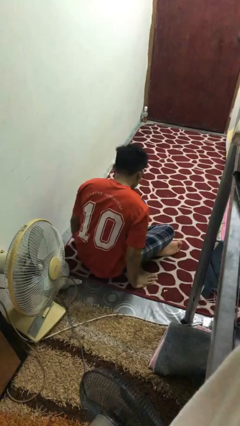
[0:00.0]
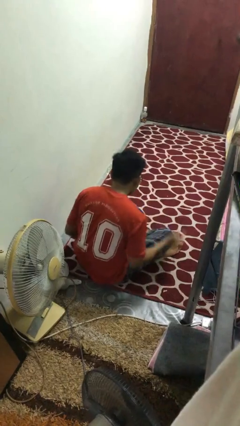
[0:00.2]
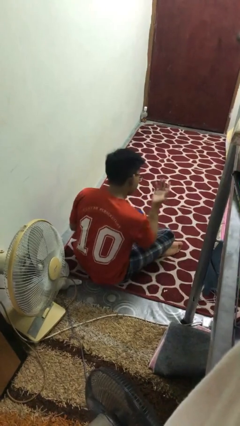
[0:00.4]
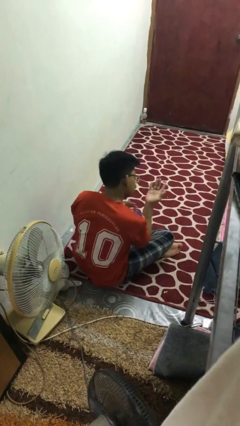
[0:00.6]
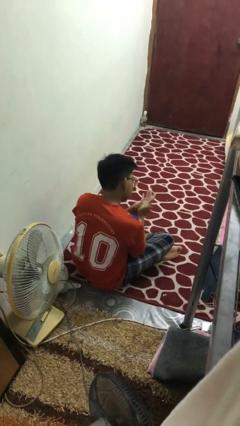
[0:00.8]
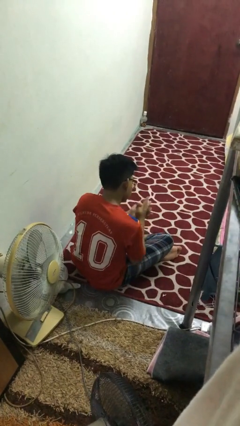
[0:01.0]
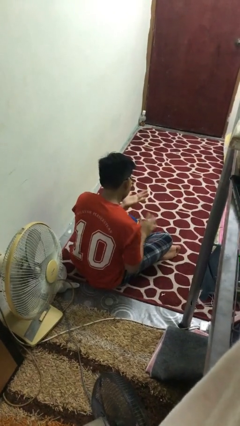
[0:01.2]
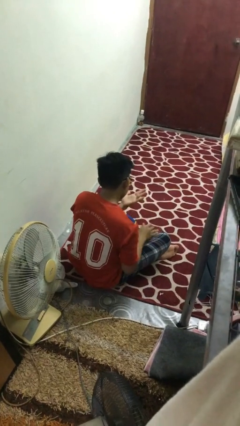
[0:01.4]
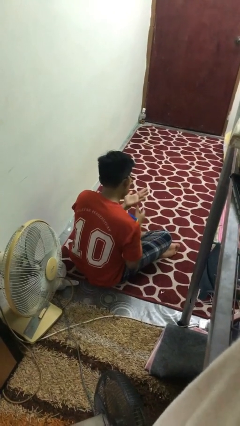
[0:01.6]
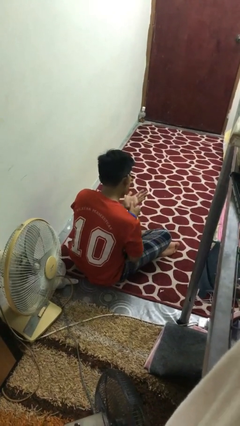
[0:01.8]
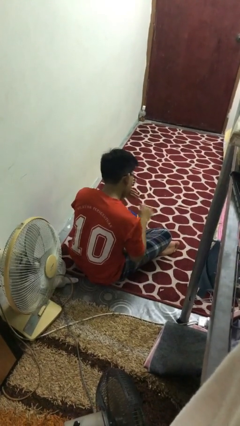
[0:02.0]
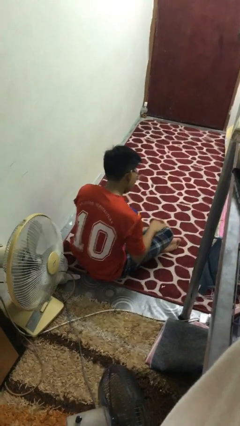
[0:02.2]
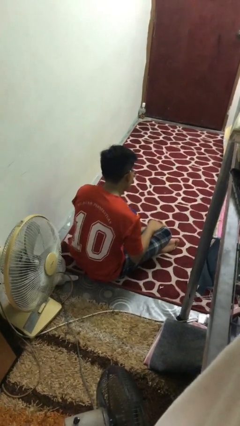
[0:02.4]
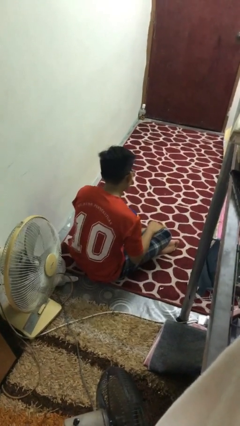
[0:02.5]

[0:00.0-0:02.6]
person looks at hands in lap

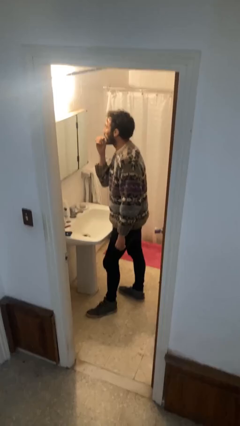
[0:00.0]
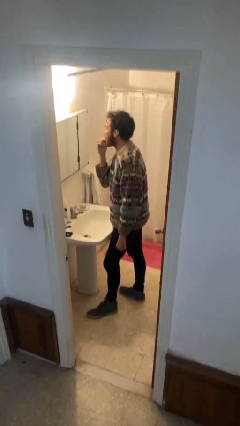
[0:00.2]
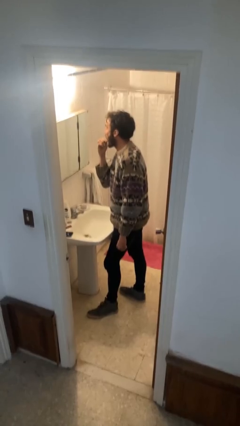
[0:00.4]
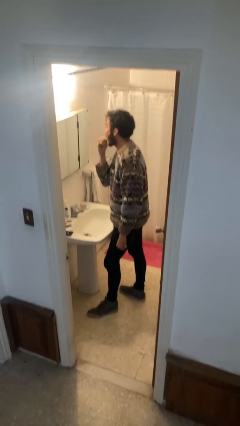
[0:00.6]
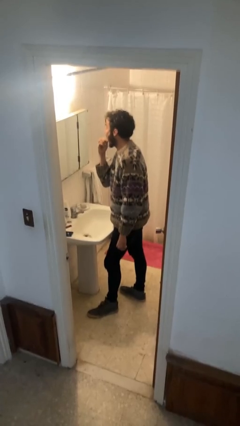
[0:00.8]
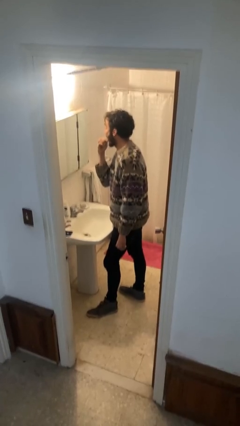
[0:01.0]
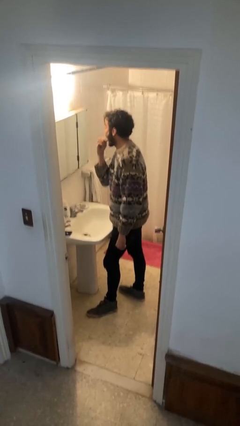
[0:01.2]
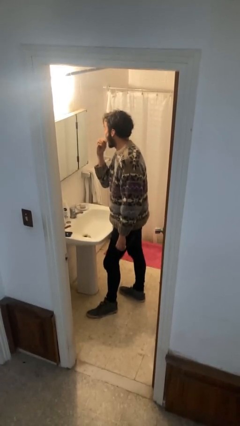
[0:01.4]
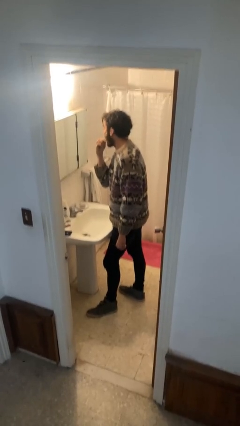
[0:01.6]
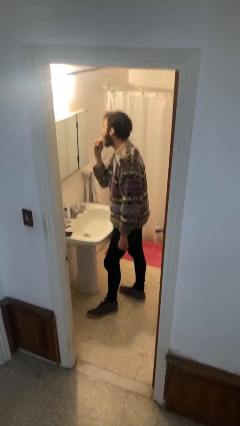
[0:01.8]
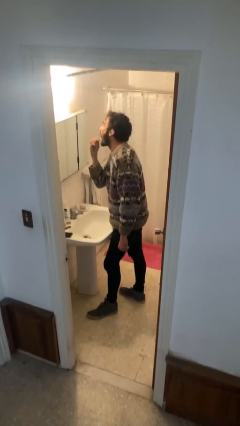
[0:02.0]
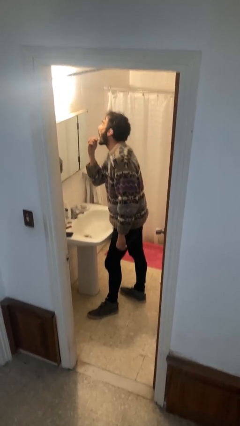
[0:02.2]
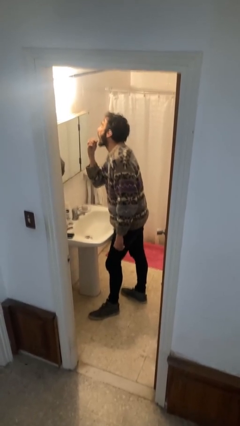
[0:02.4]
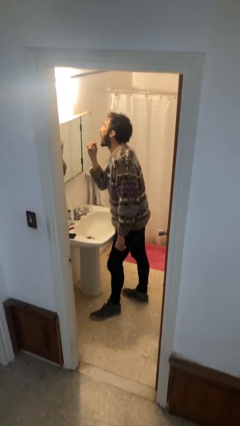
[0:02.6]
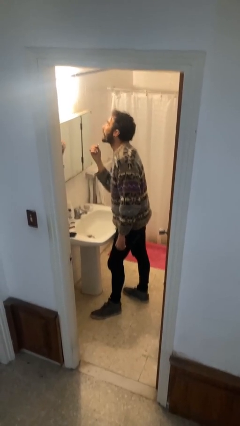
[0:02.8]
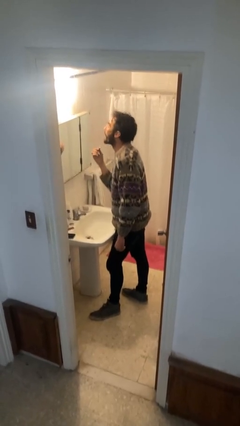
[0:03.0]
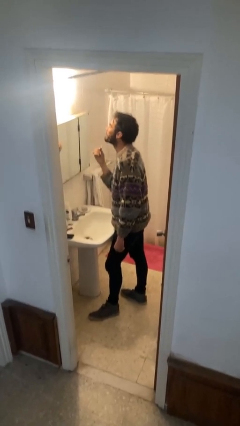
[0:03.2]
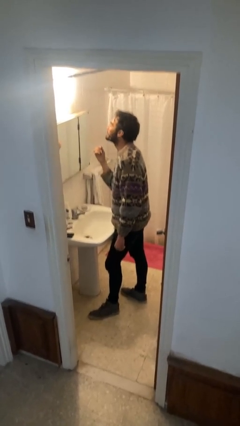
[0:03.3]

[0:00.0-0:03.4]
person applies lip makeup

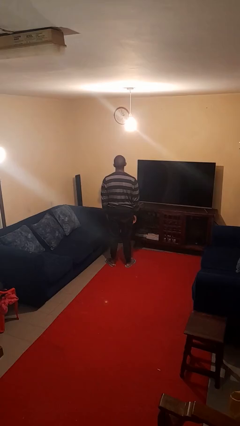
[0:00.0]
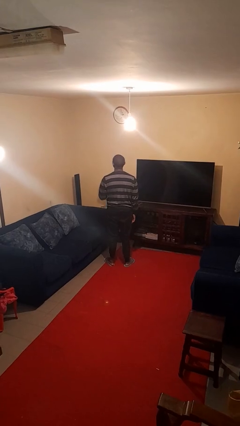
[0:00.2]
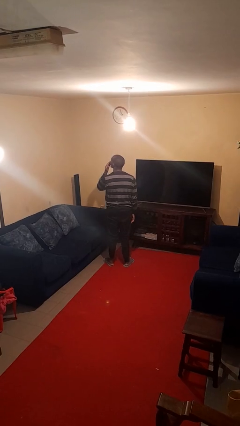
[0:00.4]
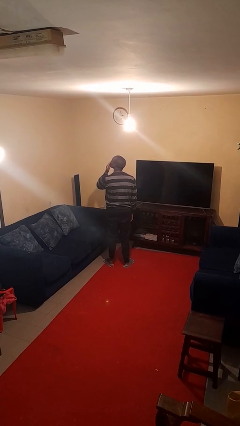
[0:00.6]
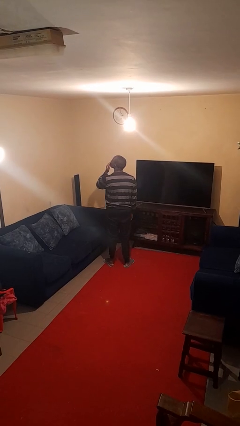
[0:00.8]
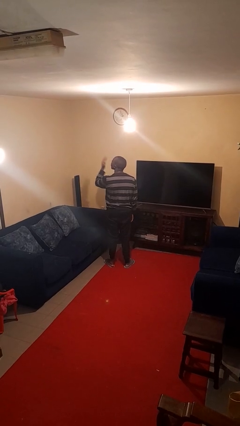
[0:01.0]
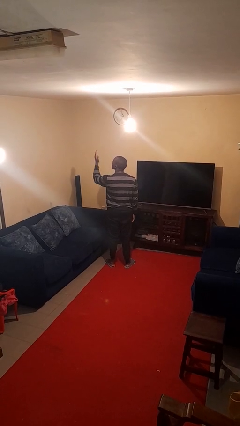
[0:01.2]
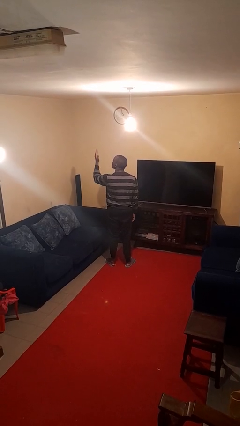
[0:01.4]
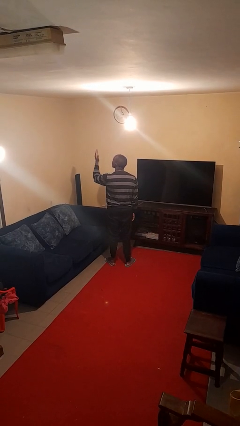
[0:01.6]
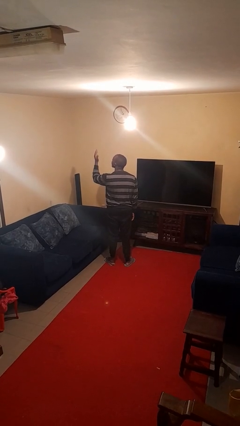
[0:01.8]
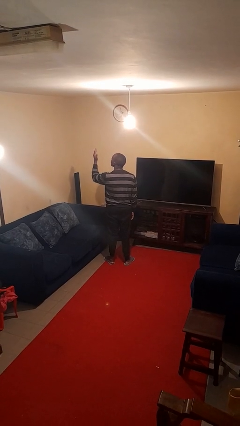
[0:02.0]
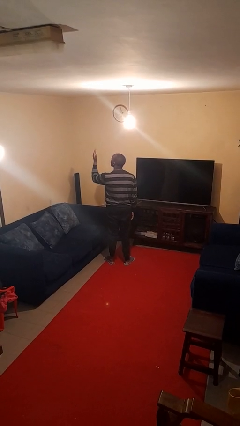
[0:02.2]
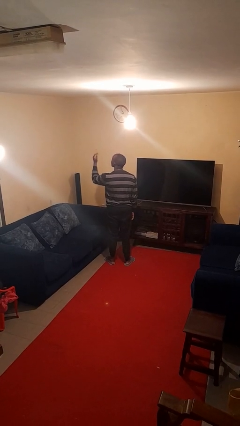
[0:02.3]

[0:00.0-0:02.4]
person gestures blow kiss

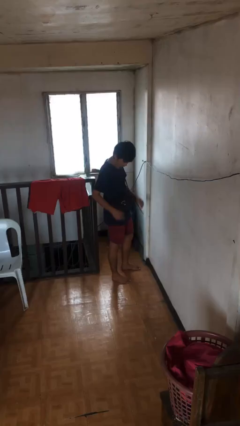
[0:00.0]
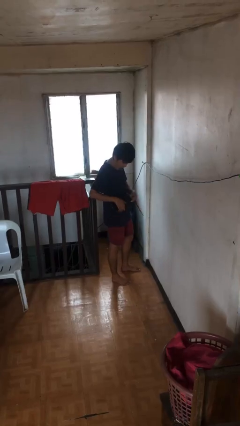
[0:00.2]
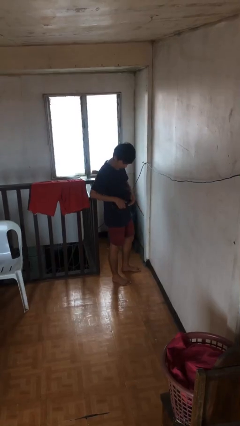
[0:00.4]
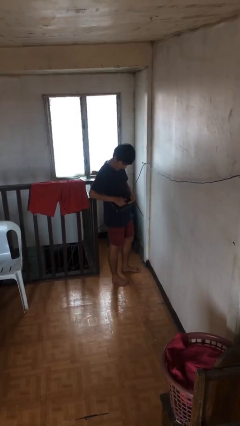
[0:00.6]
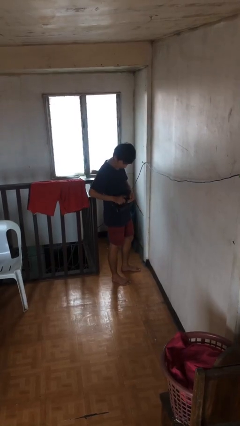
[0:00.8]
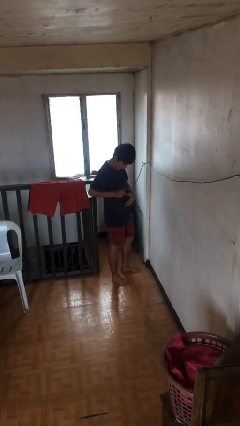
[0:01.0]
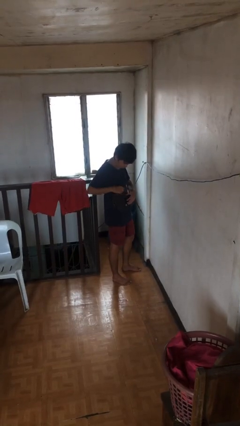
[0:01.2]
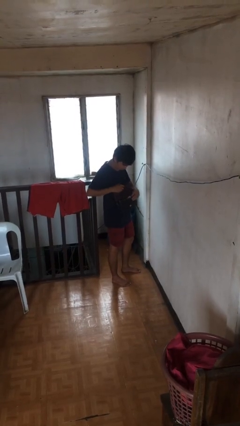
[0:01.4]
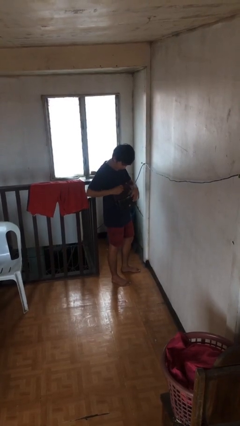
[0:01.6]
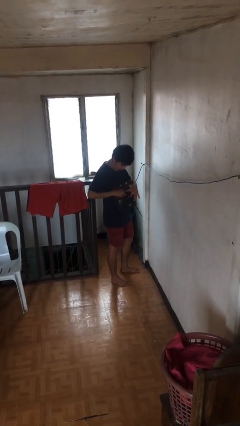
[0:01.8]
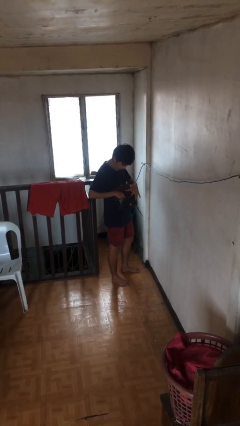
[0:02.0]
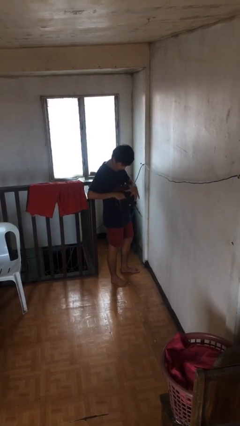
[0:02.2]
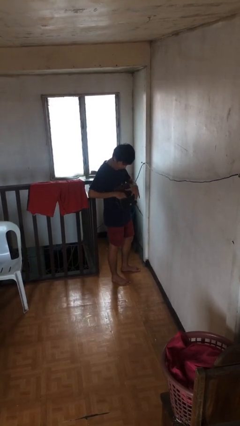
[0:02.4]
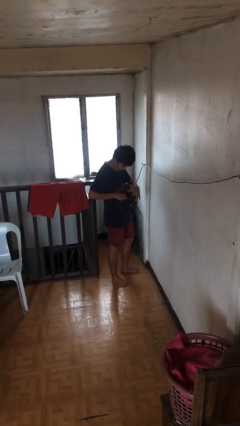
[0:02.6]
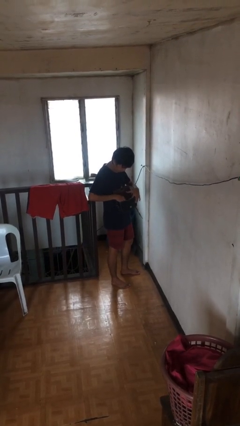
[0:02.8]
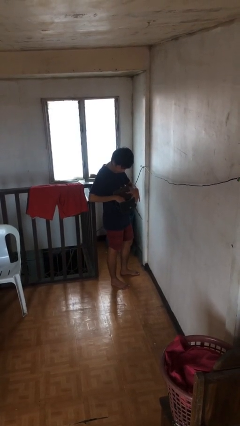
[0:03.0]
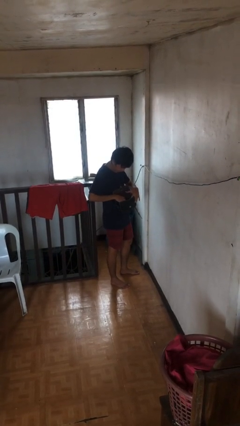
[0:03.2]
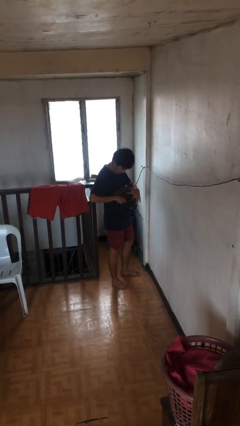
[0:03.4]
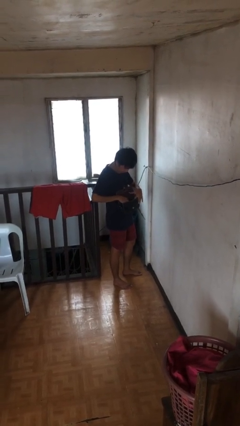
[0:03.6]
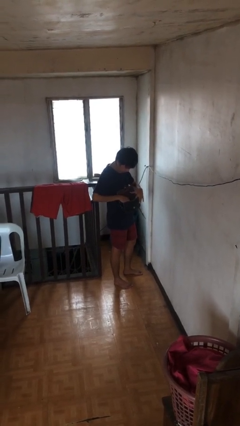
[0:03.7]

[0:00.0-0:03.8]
person searches in purse

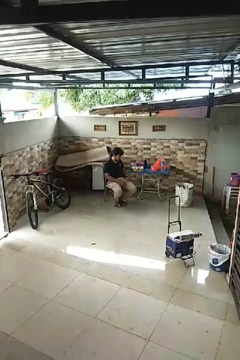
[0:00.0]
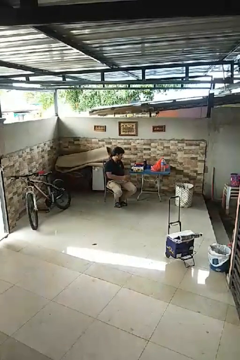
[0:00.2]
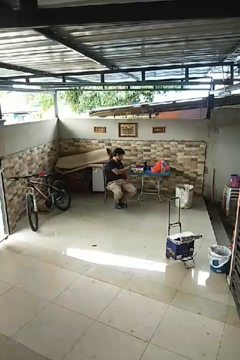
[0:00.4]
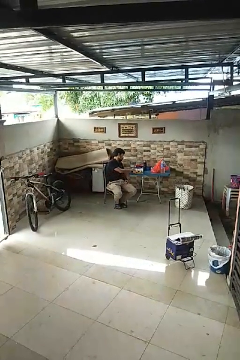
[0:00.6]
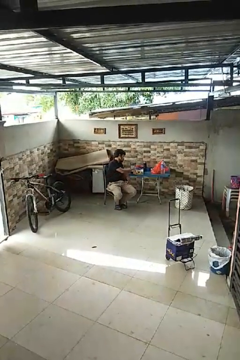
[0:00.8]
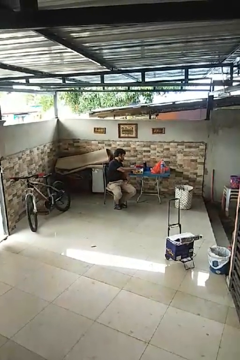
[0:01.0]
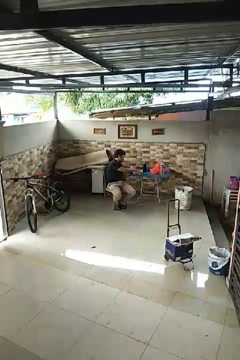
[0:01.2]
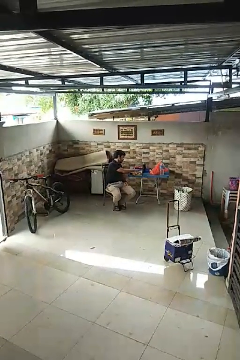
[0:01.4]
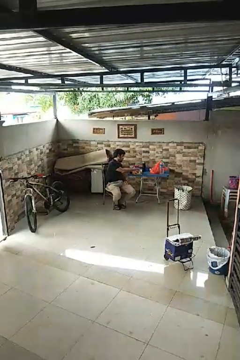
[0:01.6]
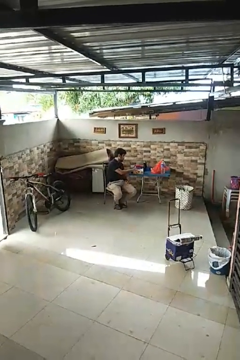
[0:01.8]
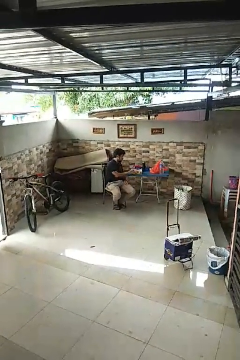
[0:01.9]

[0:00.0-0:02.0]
person taps object with finger

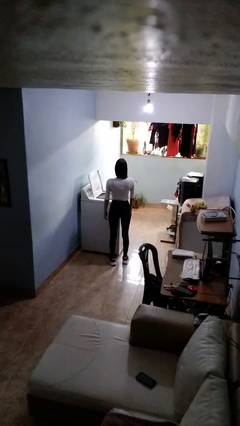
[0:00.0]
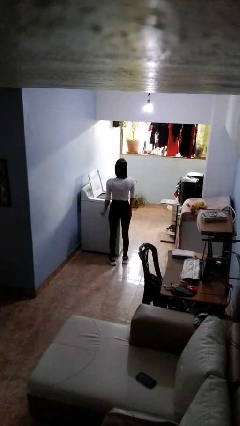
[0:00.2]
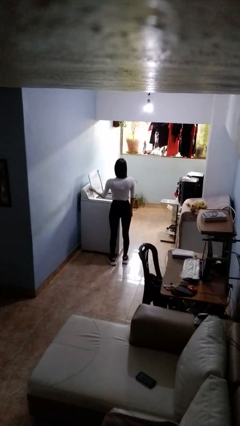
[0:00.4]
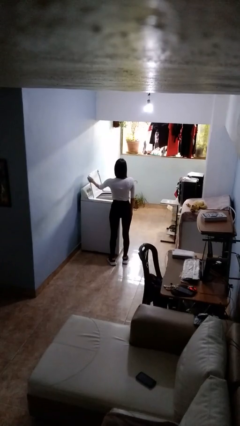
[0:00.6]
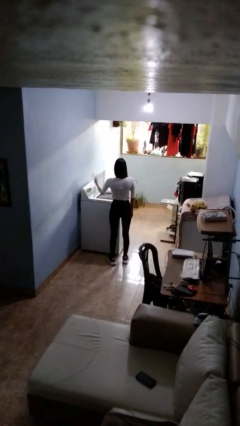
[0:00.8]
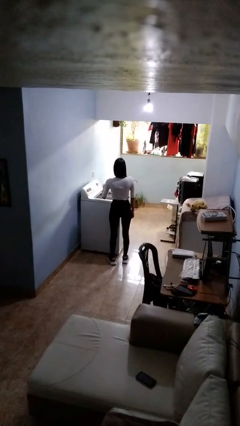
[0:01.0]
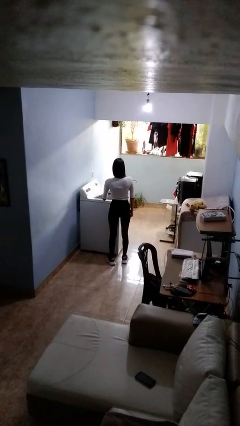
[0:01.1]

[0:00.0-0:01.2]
person closes clothes washer

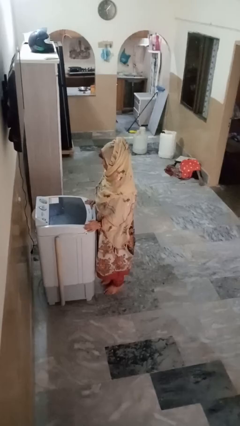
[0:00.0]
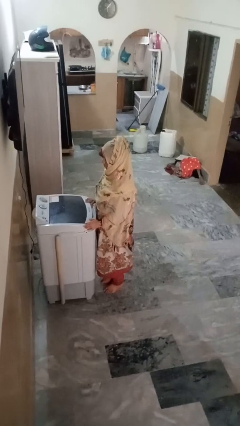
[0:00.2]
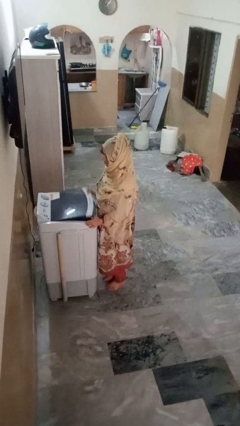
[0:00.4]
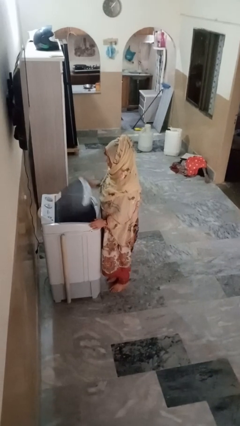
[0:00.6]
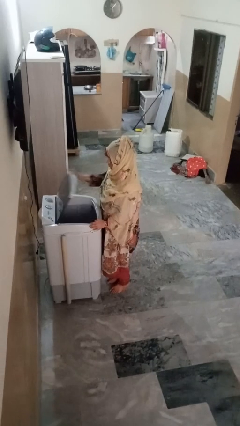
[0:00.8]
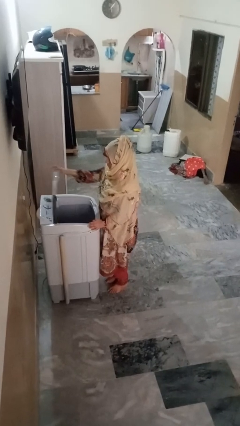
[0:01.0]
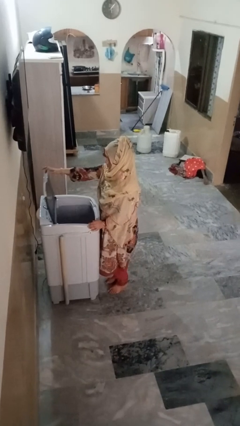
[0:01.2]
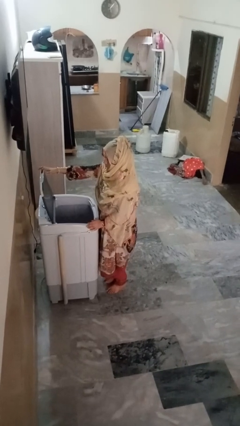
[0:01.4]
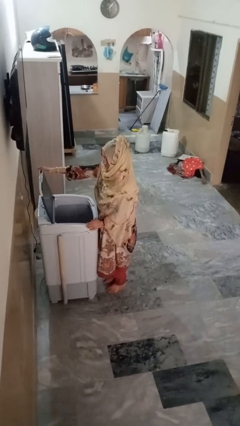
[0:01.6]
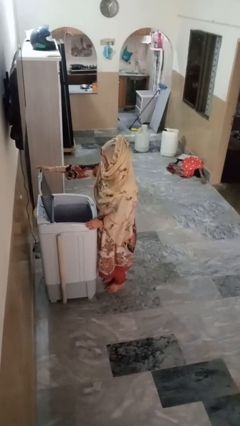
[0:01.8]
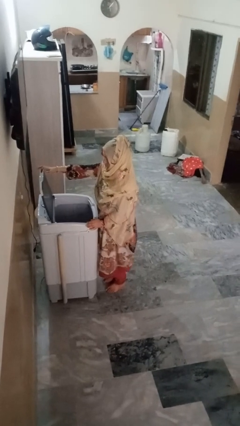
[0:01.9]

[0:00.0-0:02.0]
person opens clothes washer
